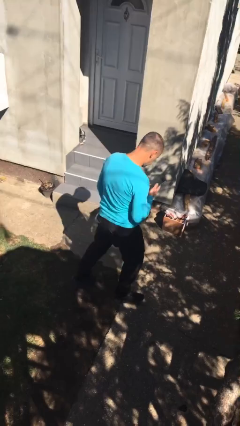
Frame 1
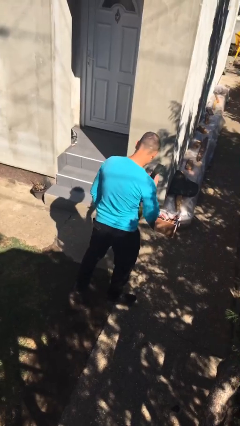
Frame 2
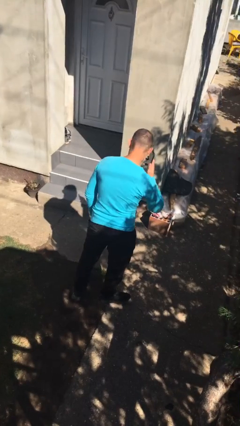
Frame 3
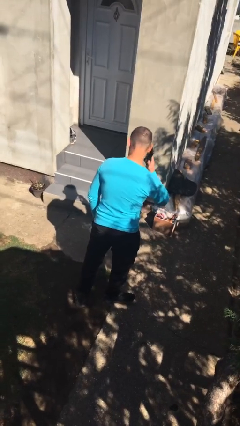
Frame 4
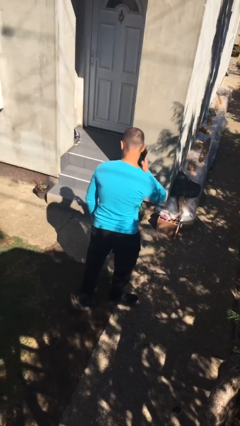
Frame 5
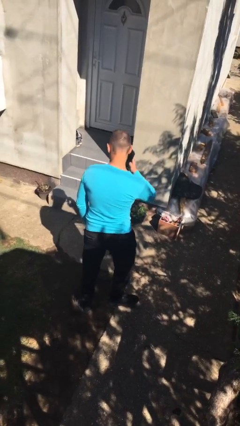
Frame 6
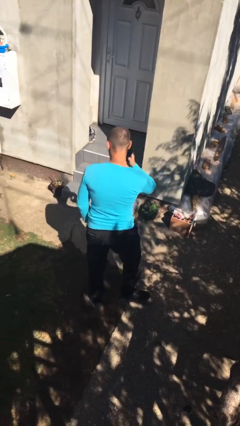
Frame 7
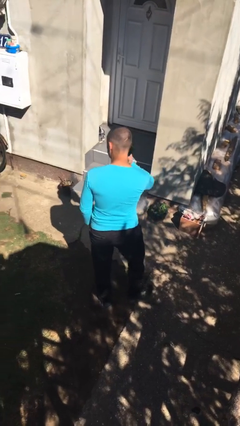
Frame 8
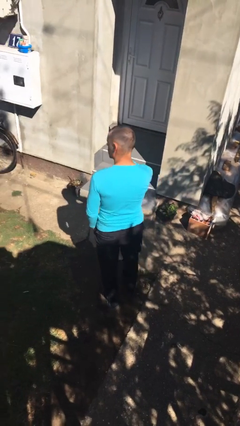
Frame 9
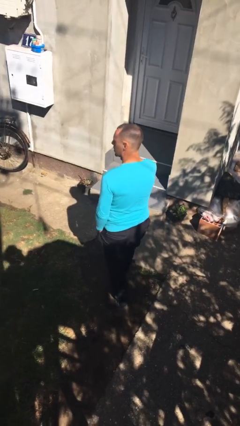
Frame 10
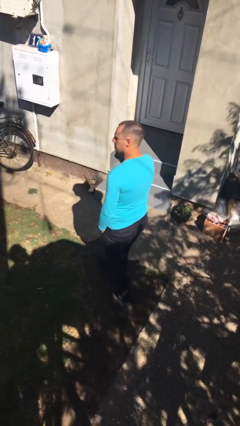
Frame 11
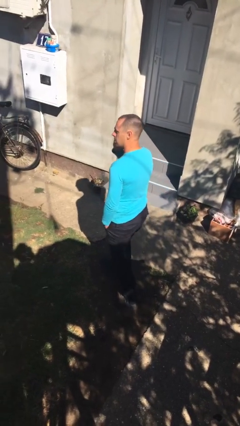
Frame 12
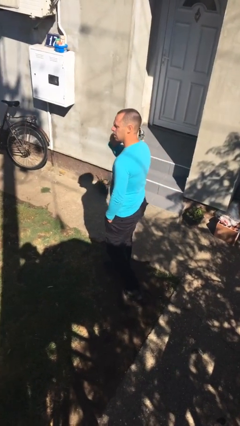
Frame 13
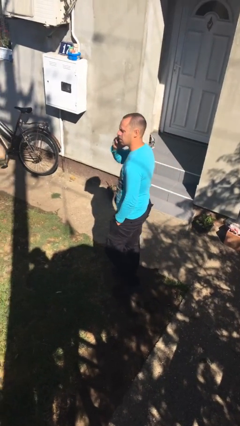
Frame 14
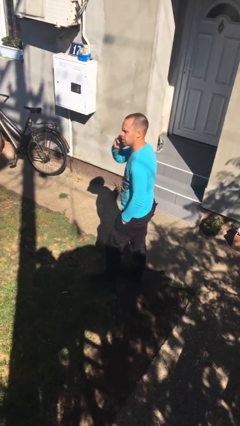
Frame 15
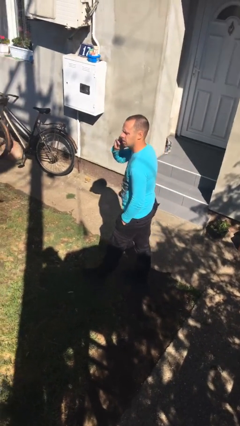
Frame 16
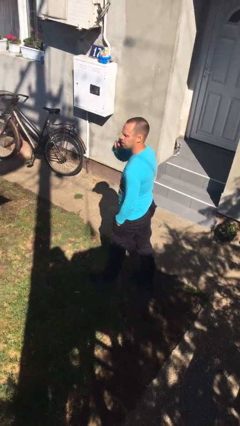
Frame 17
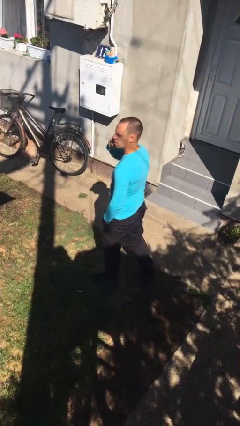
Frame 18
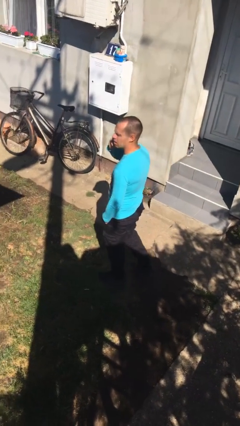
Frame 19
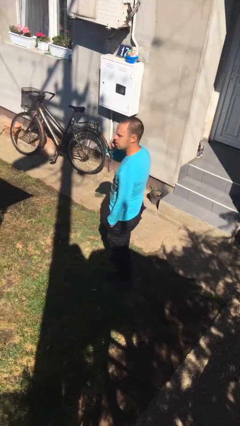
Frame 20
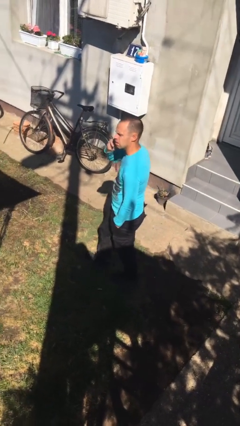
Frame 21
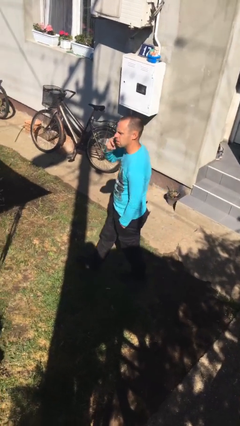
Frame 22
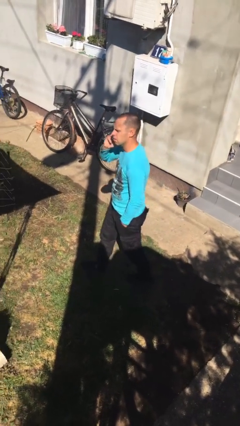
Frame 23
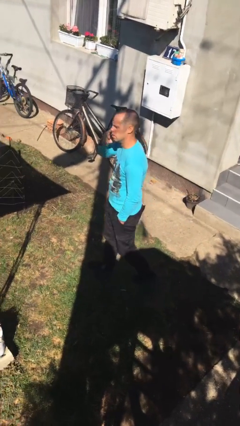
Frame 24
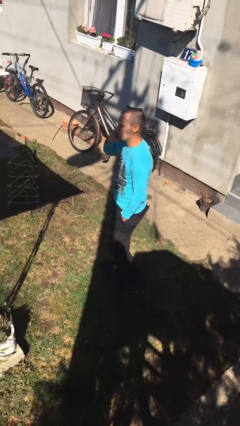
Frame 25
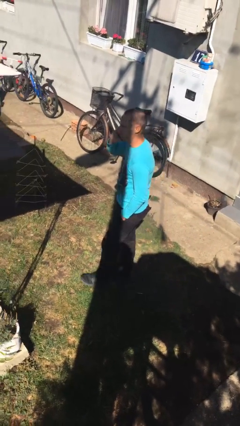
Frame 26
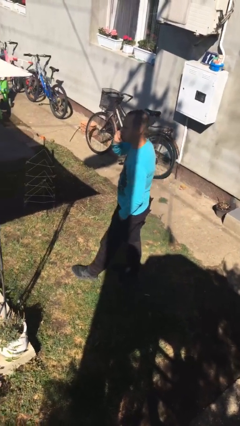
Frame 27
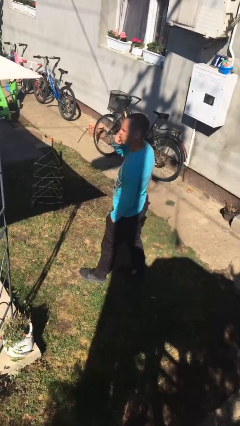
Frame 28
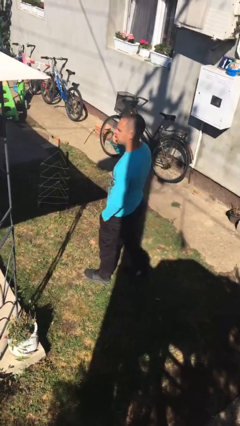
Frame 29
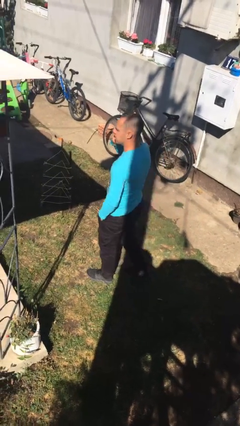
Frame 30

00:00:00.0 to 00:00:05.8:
person talks on phone

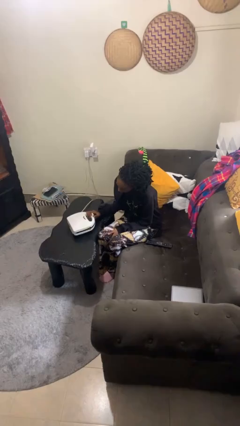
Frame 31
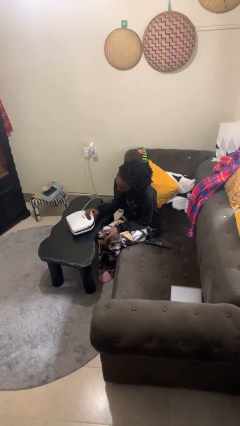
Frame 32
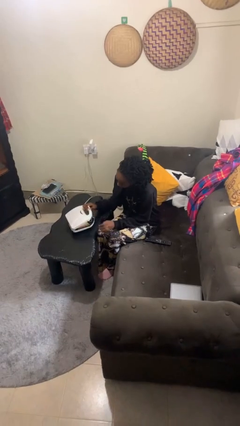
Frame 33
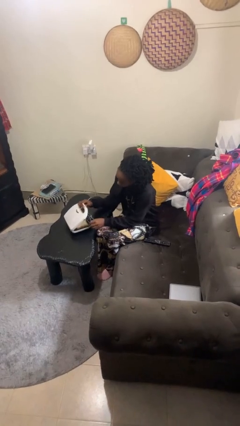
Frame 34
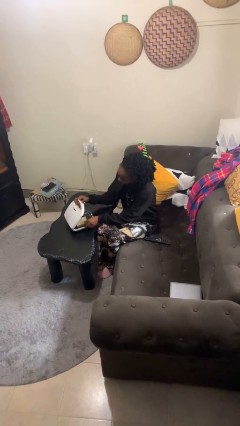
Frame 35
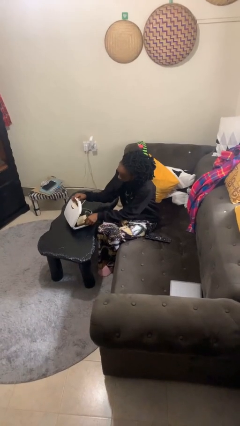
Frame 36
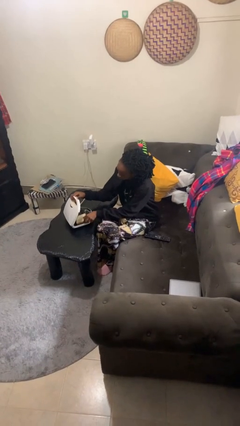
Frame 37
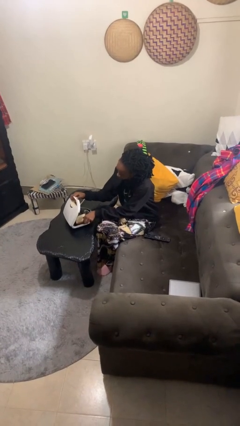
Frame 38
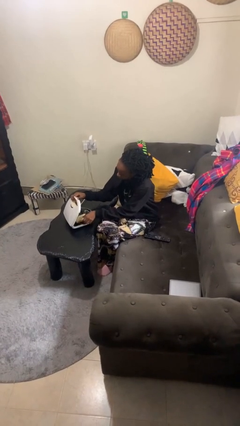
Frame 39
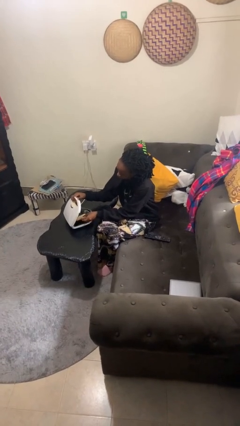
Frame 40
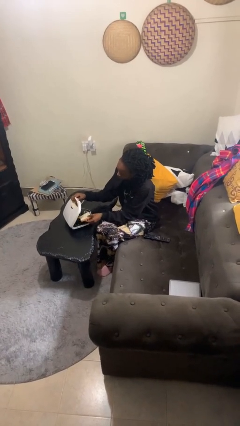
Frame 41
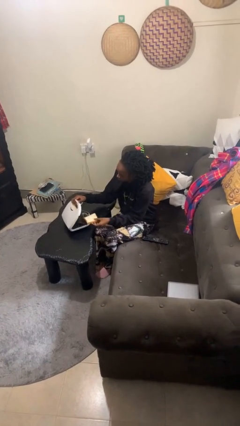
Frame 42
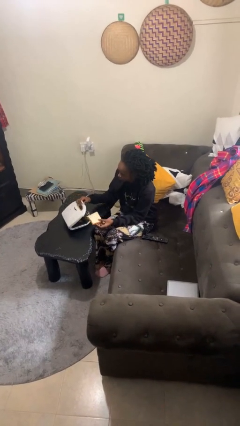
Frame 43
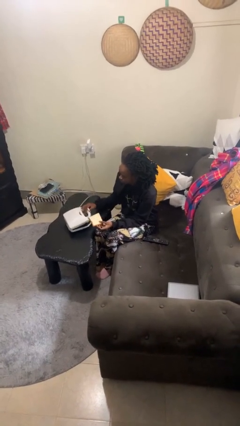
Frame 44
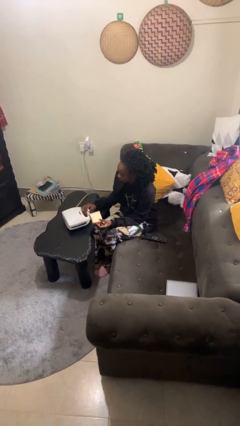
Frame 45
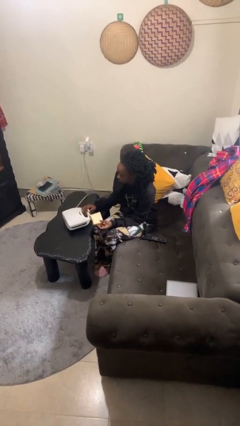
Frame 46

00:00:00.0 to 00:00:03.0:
person takes object from toaster

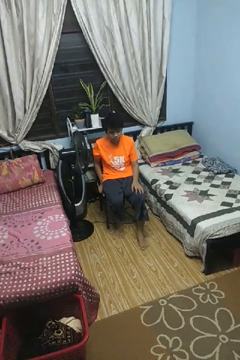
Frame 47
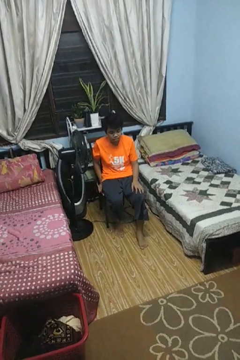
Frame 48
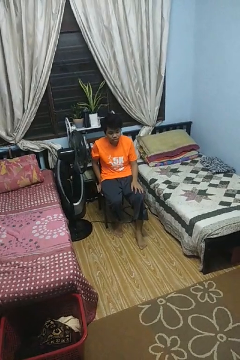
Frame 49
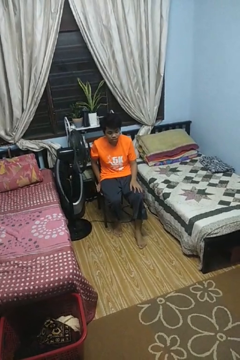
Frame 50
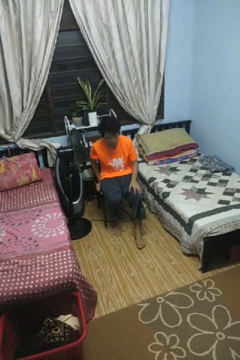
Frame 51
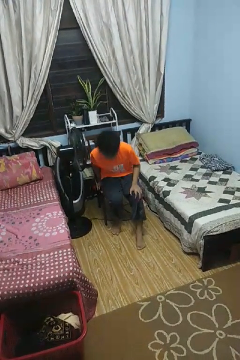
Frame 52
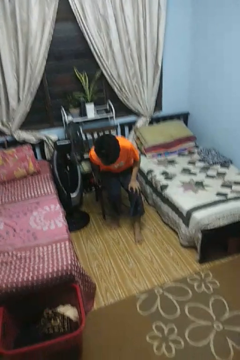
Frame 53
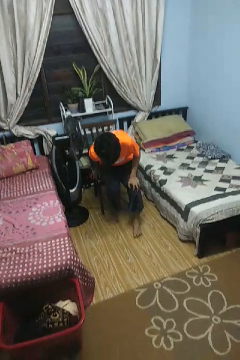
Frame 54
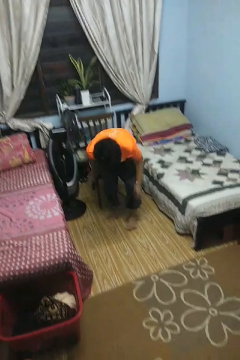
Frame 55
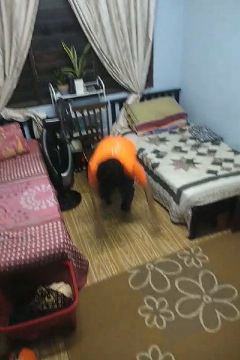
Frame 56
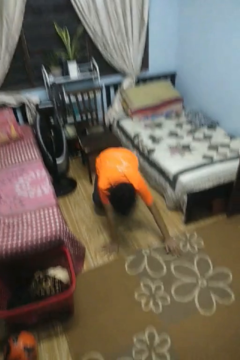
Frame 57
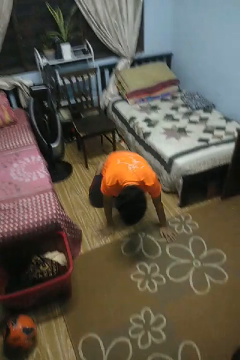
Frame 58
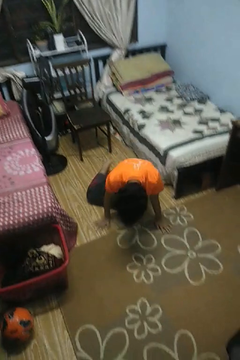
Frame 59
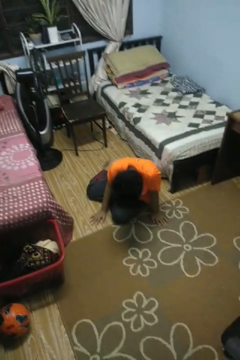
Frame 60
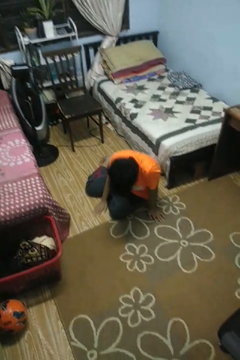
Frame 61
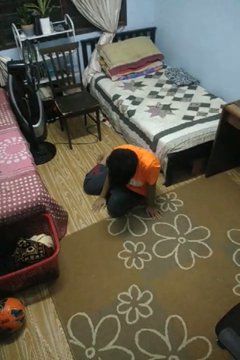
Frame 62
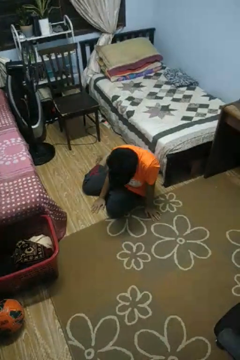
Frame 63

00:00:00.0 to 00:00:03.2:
person falls from chair

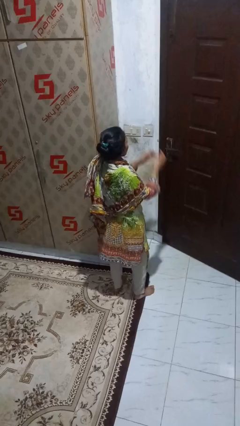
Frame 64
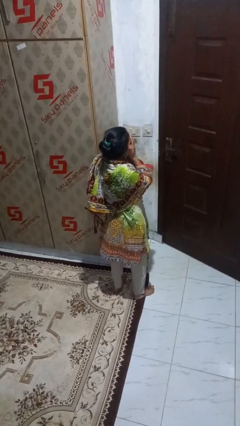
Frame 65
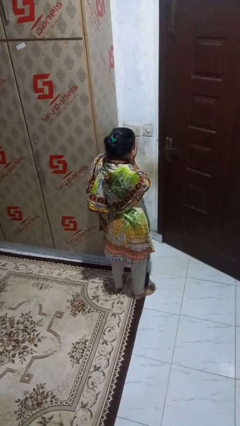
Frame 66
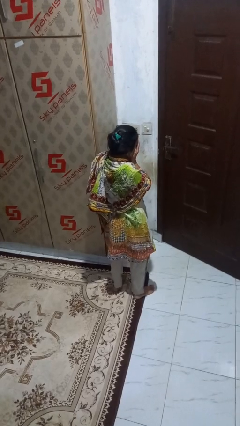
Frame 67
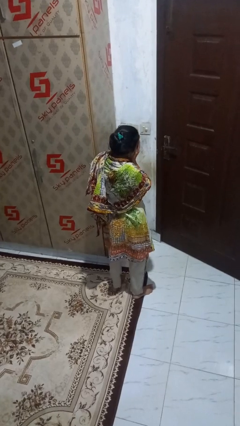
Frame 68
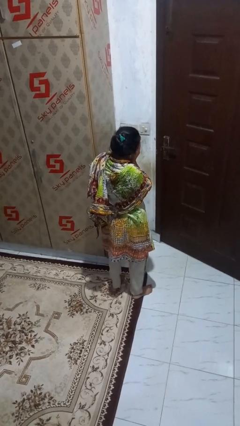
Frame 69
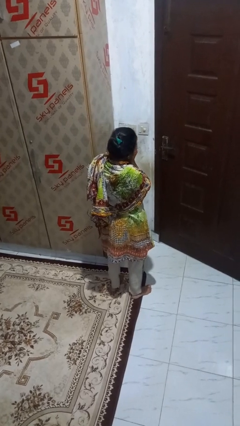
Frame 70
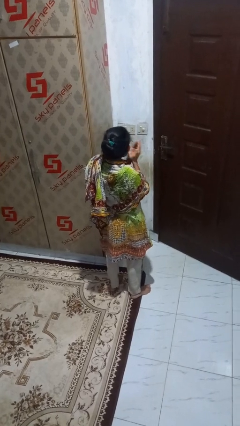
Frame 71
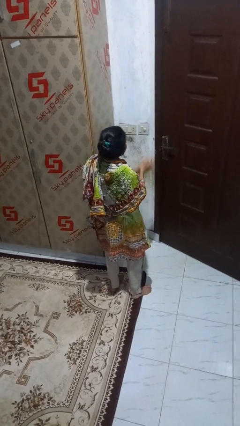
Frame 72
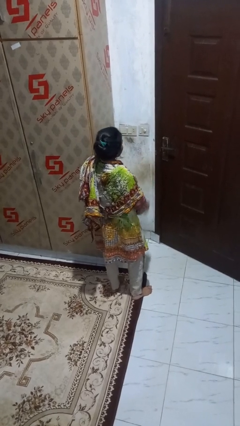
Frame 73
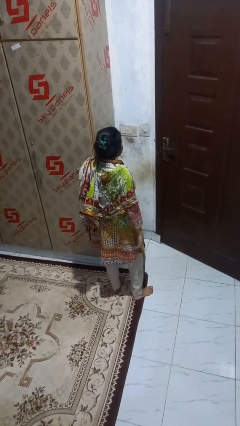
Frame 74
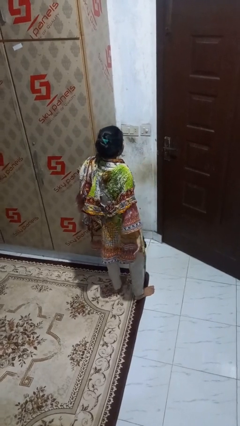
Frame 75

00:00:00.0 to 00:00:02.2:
person sneezes into hand

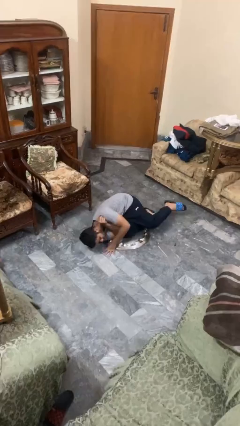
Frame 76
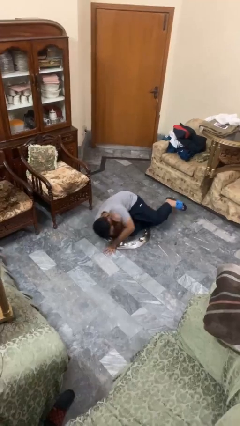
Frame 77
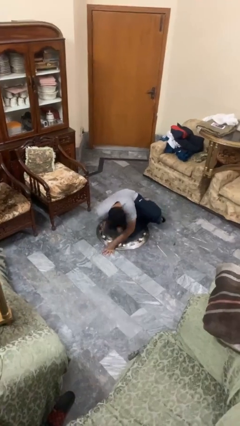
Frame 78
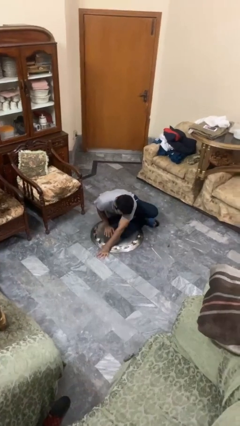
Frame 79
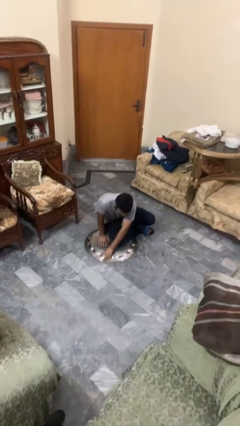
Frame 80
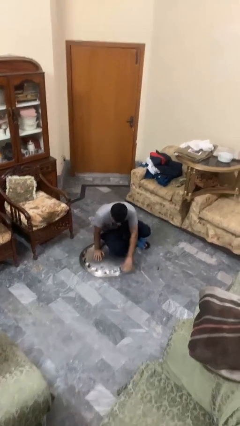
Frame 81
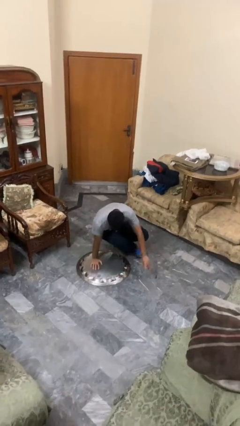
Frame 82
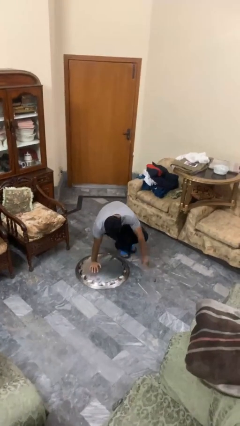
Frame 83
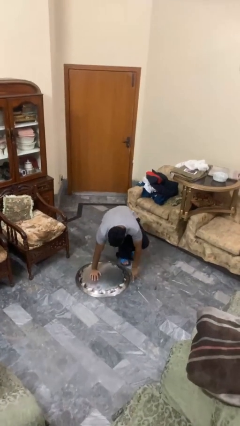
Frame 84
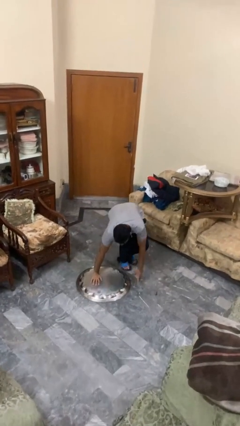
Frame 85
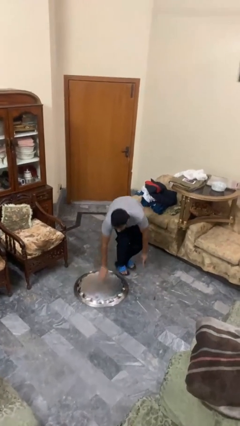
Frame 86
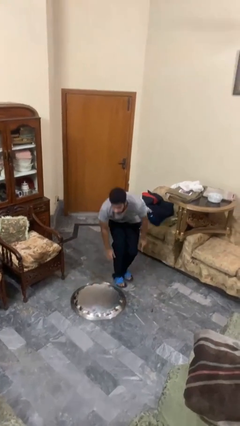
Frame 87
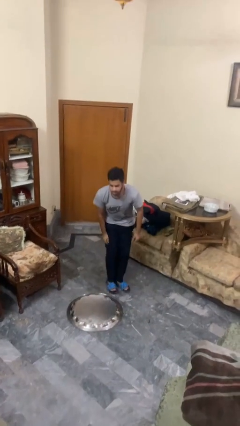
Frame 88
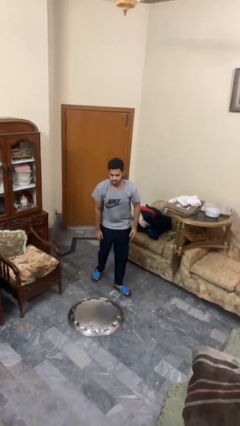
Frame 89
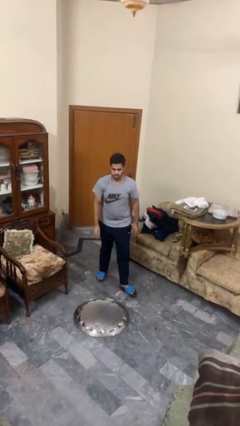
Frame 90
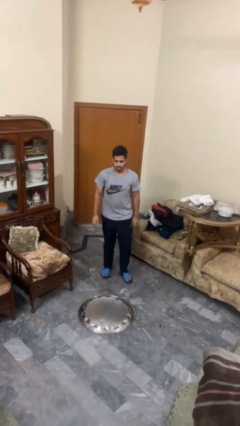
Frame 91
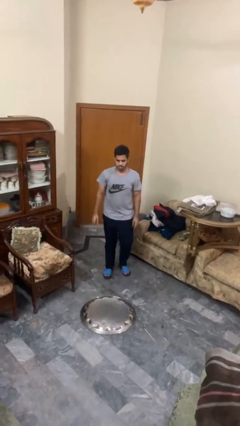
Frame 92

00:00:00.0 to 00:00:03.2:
person stands up from floor

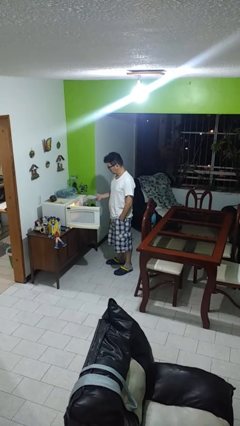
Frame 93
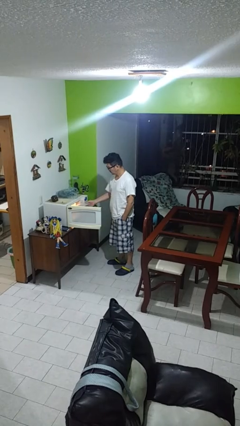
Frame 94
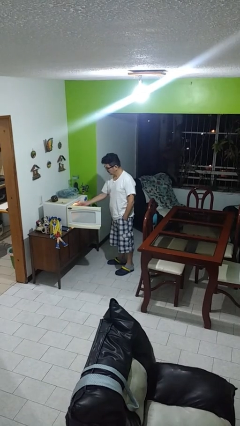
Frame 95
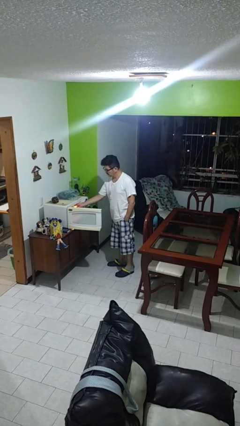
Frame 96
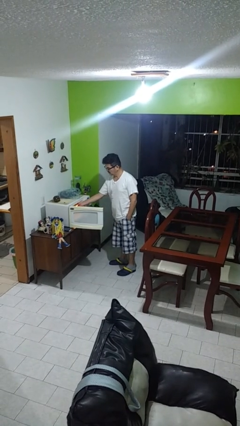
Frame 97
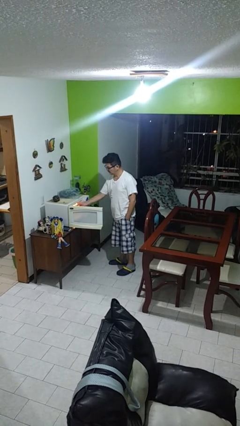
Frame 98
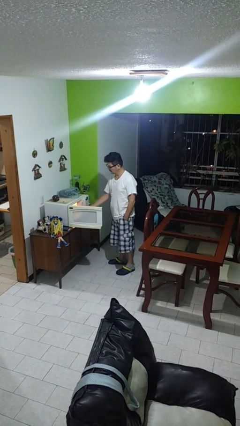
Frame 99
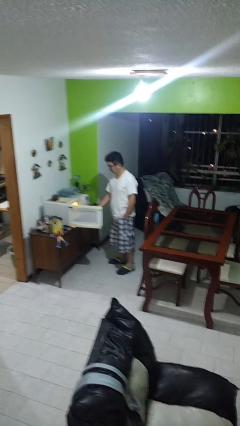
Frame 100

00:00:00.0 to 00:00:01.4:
person puts object into microwave
